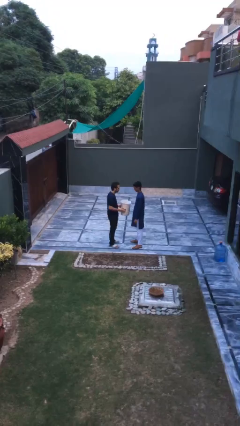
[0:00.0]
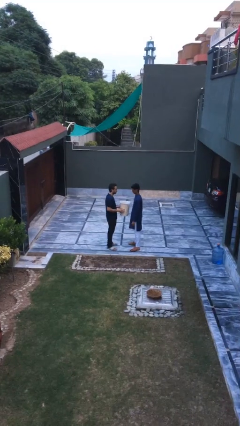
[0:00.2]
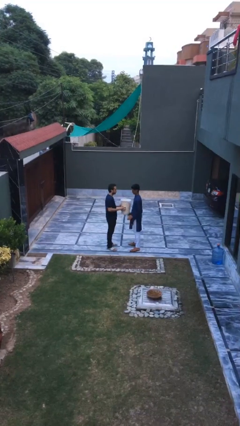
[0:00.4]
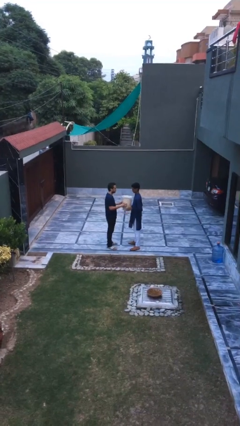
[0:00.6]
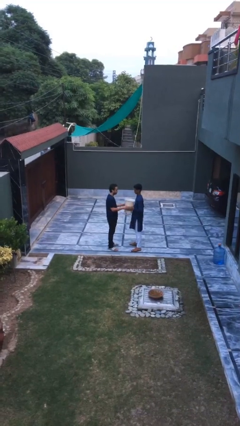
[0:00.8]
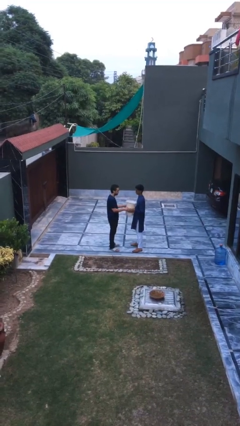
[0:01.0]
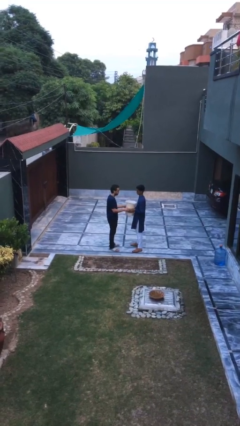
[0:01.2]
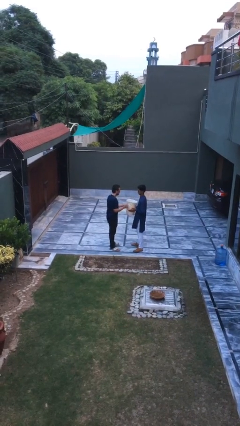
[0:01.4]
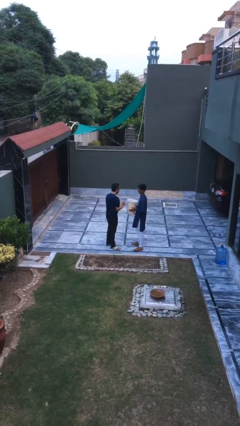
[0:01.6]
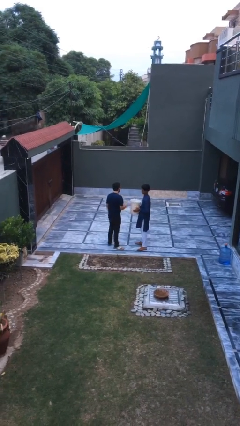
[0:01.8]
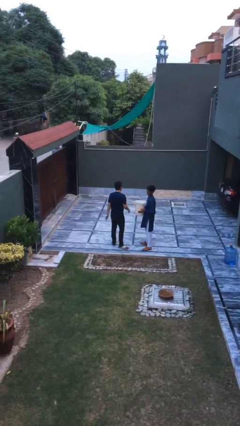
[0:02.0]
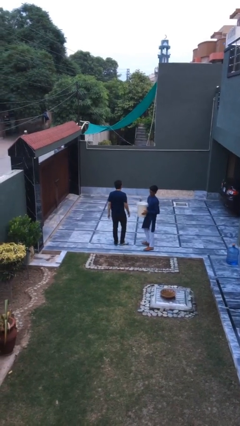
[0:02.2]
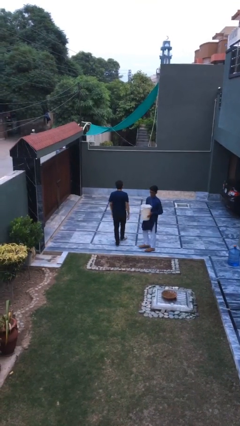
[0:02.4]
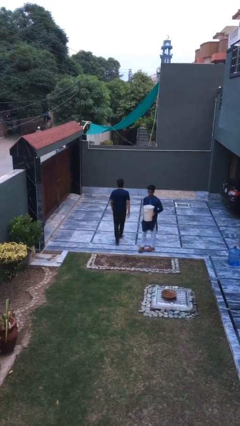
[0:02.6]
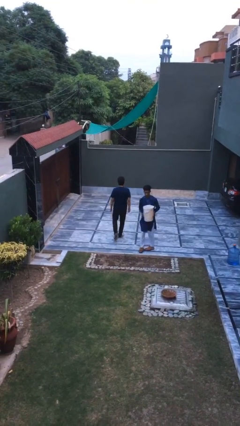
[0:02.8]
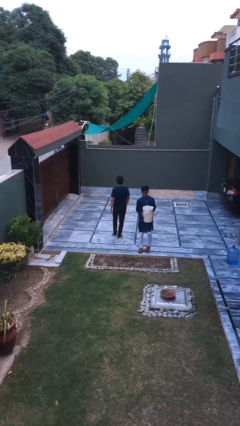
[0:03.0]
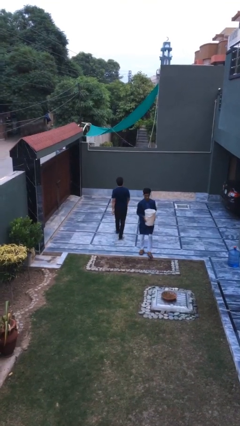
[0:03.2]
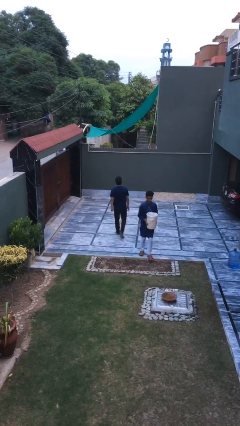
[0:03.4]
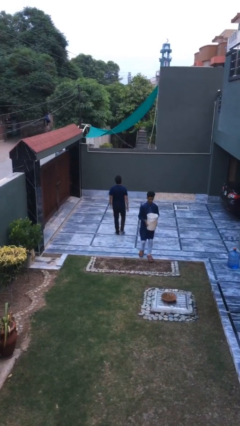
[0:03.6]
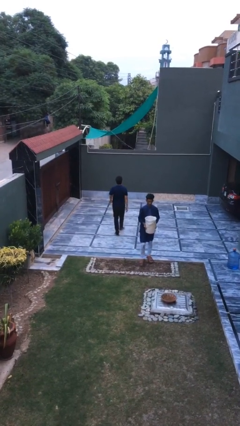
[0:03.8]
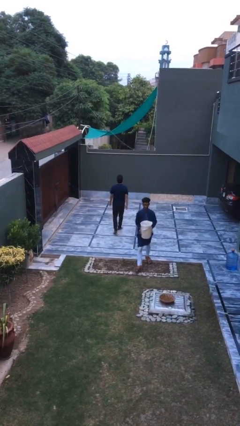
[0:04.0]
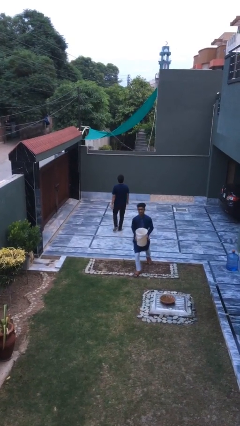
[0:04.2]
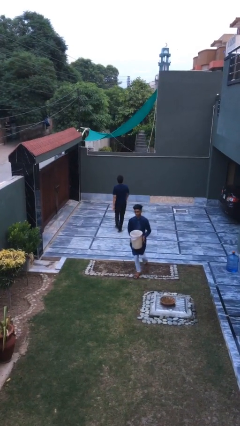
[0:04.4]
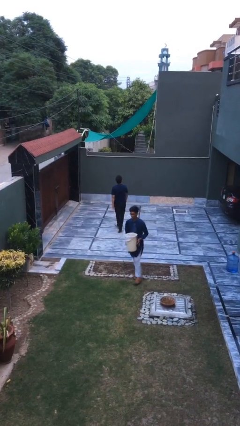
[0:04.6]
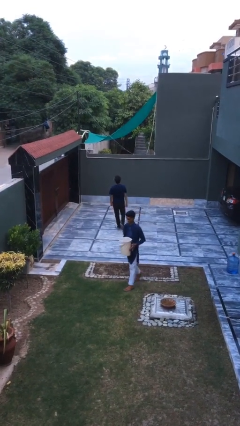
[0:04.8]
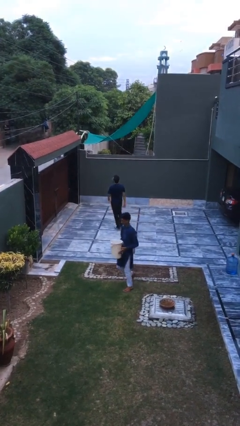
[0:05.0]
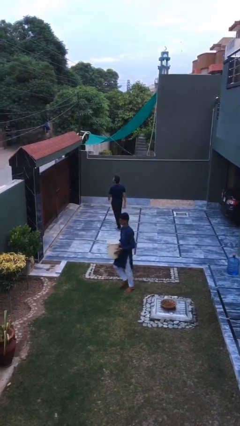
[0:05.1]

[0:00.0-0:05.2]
person transfers object to person

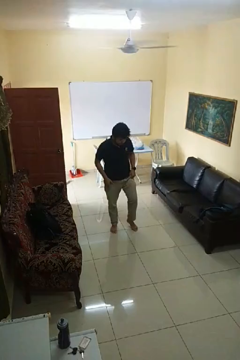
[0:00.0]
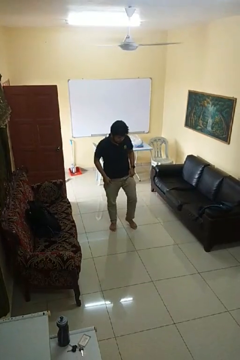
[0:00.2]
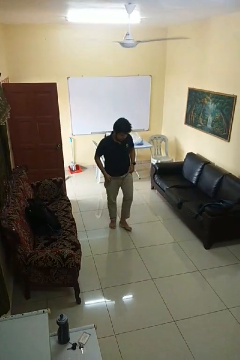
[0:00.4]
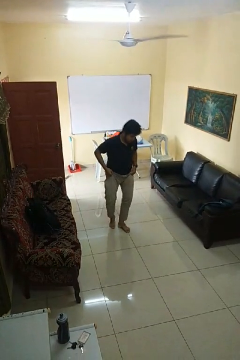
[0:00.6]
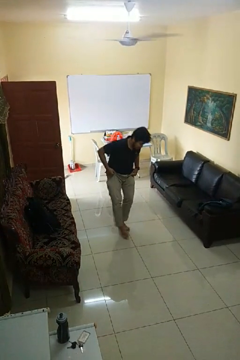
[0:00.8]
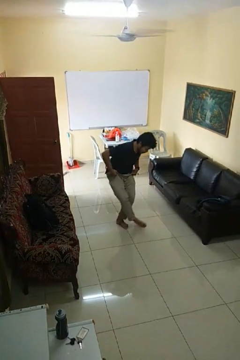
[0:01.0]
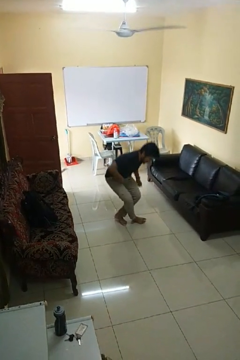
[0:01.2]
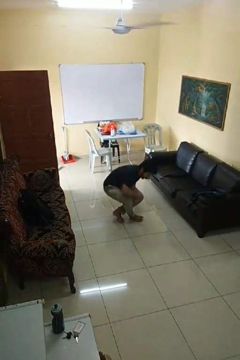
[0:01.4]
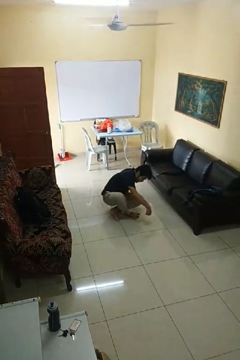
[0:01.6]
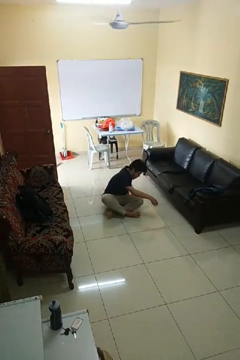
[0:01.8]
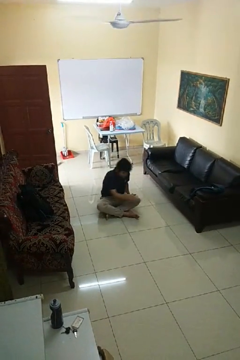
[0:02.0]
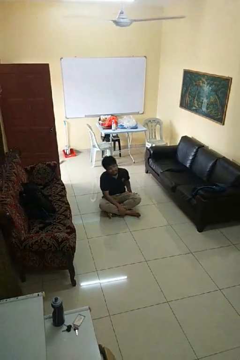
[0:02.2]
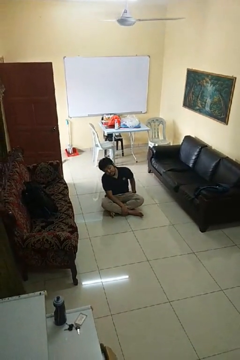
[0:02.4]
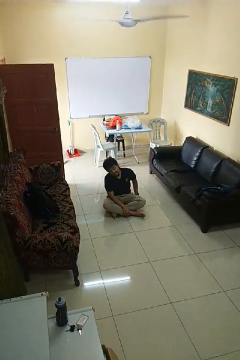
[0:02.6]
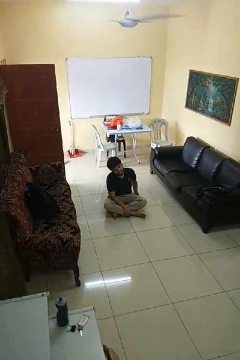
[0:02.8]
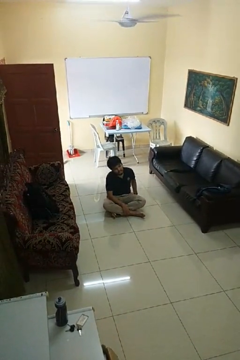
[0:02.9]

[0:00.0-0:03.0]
person sits crisscross

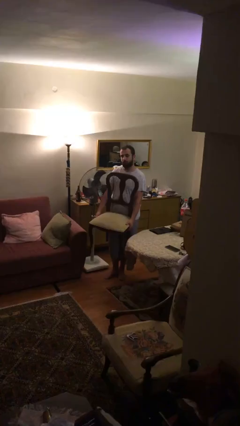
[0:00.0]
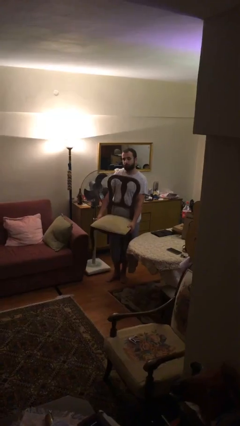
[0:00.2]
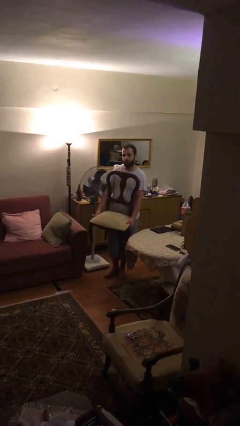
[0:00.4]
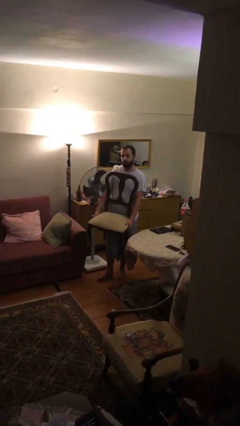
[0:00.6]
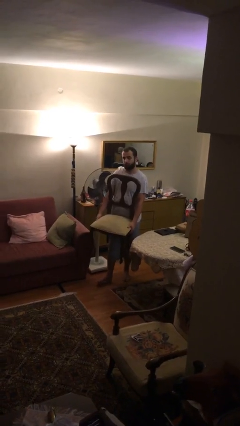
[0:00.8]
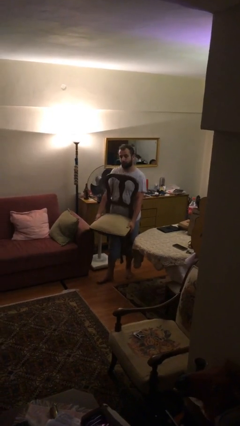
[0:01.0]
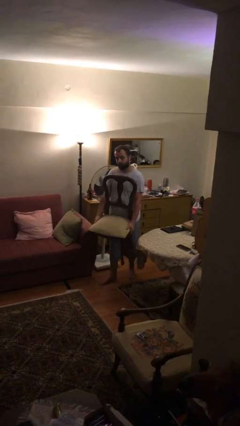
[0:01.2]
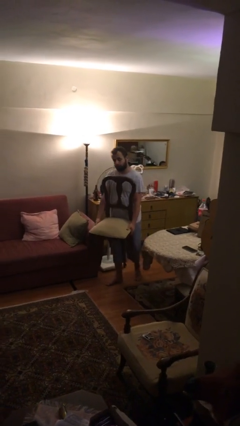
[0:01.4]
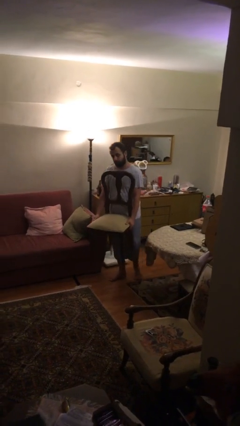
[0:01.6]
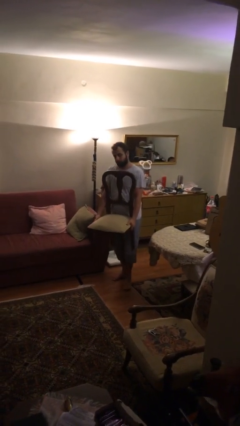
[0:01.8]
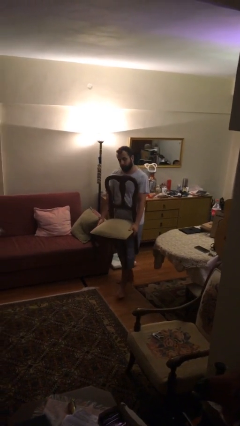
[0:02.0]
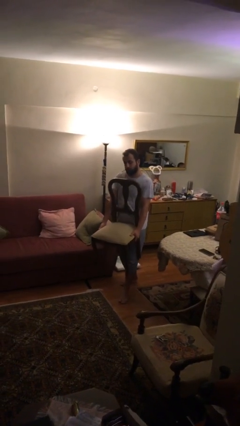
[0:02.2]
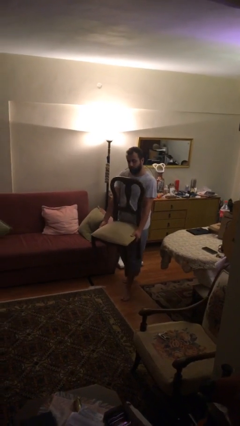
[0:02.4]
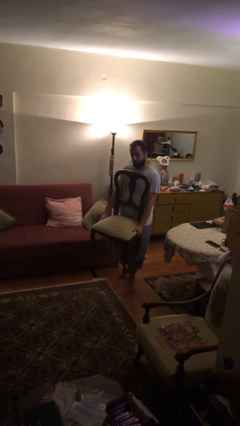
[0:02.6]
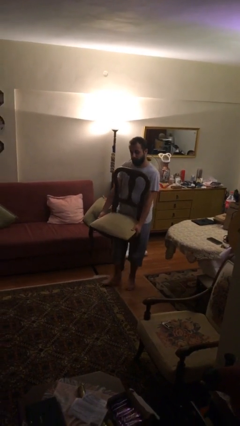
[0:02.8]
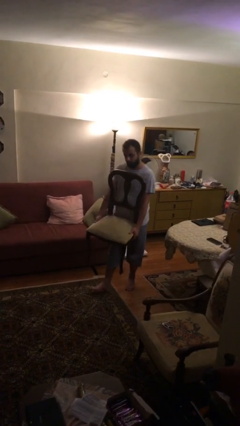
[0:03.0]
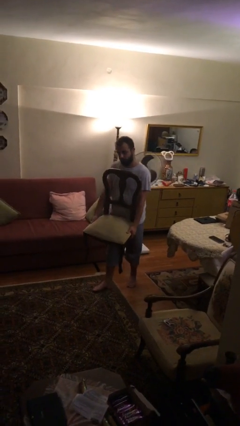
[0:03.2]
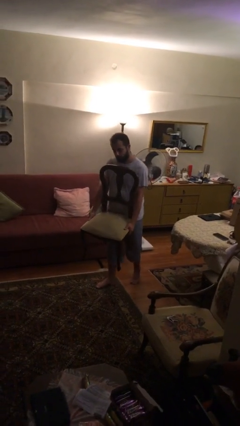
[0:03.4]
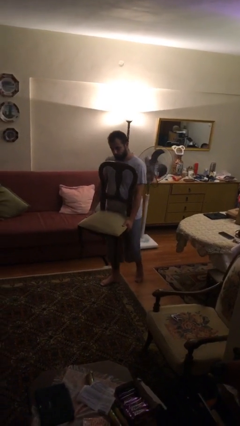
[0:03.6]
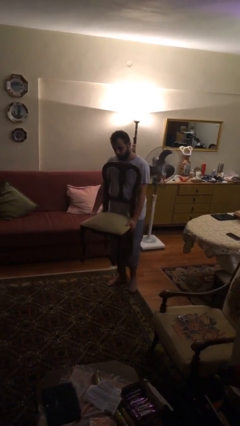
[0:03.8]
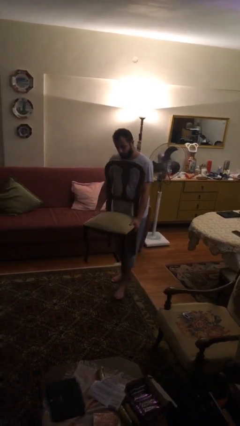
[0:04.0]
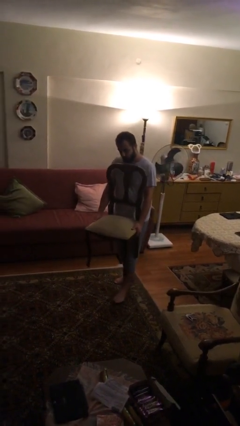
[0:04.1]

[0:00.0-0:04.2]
person carries heavy object

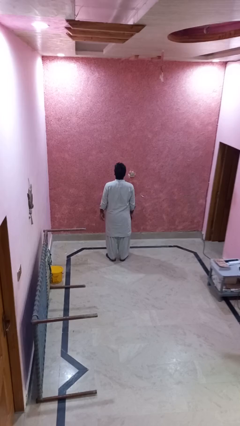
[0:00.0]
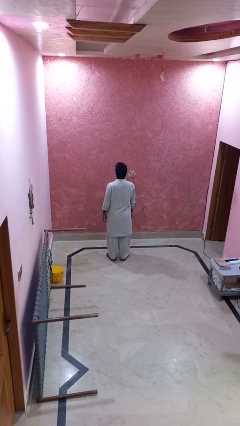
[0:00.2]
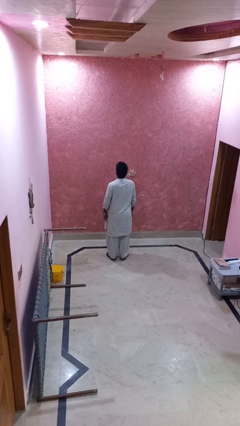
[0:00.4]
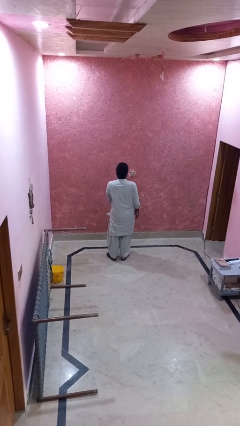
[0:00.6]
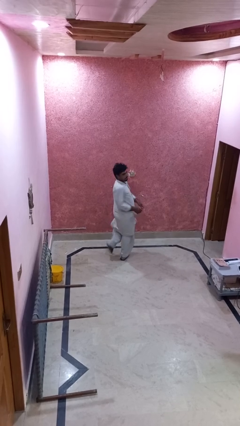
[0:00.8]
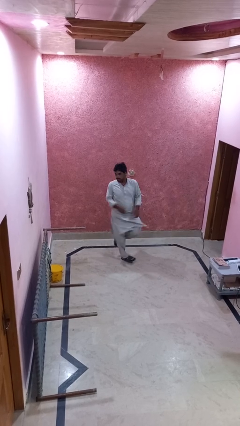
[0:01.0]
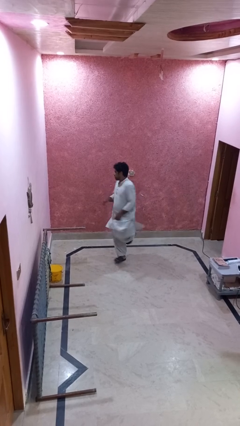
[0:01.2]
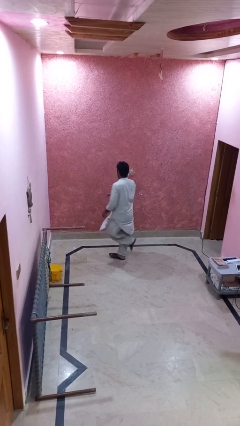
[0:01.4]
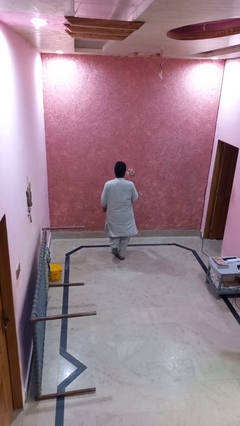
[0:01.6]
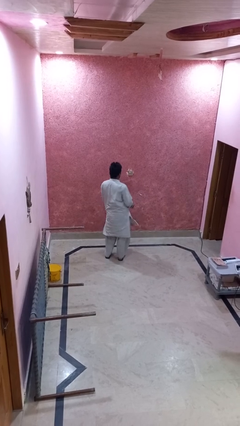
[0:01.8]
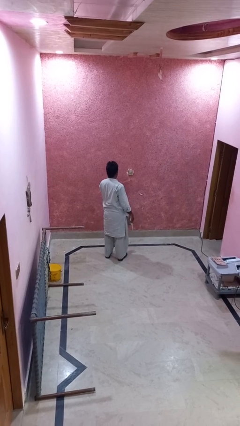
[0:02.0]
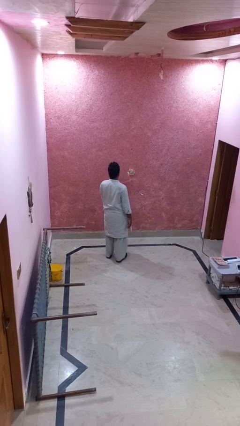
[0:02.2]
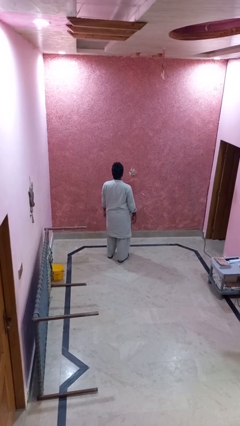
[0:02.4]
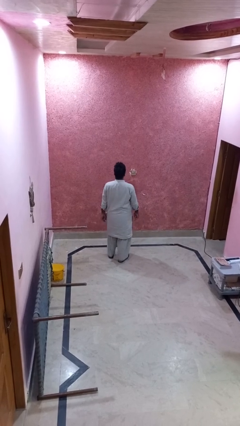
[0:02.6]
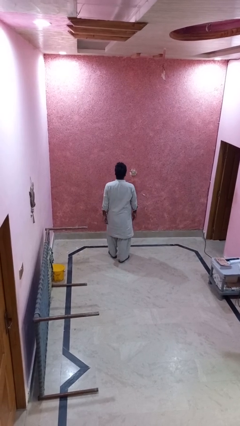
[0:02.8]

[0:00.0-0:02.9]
person twirls

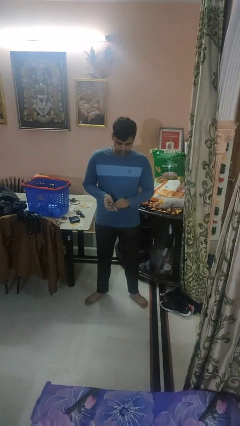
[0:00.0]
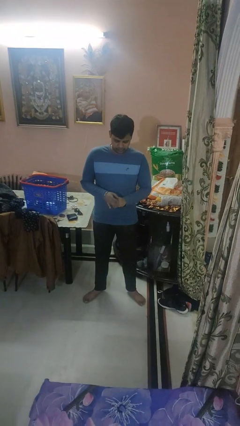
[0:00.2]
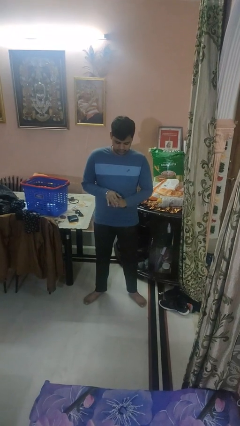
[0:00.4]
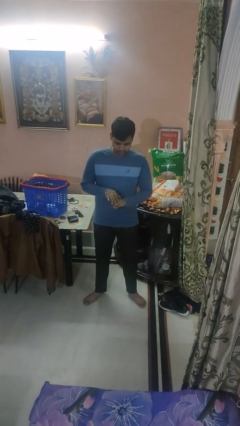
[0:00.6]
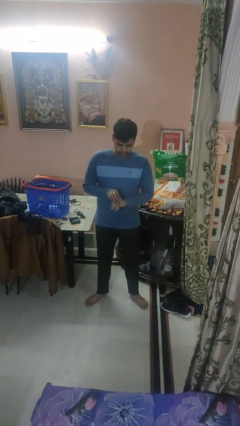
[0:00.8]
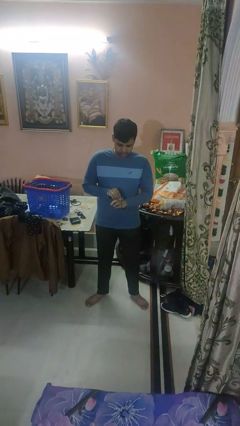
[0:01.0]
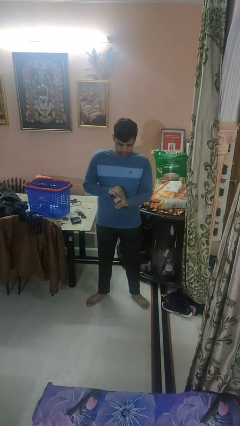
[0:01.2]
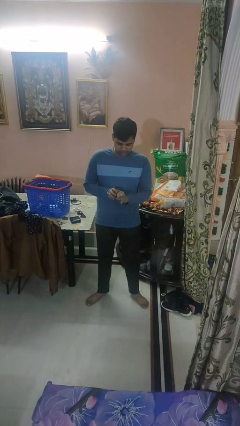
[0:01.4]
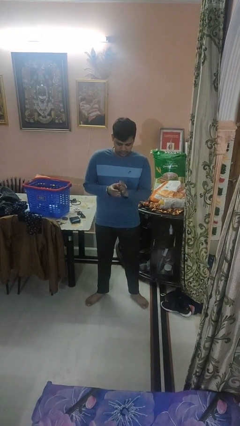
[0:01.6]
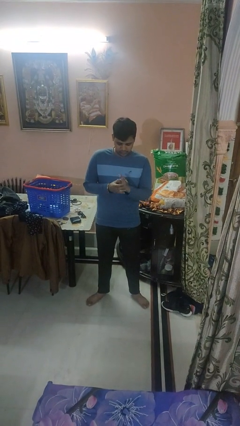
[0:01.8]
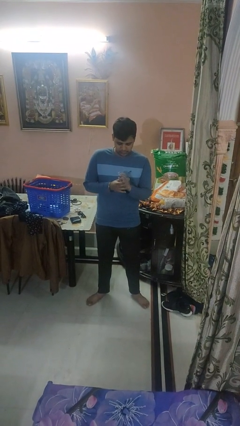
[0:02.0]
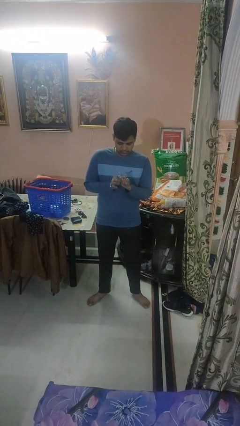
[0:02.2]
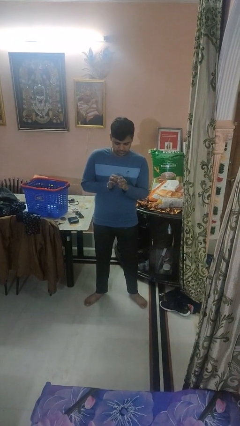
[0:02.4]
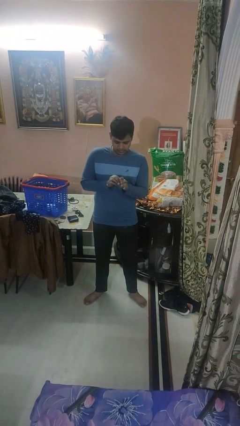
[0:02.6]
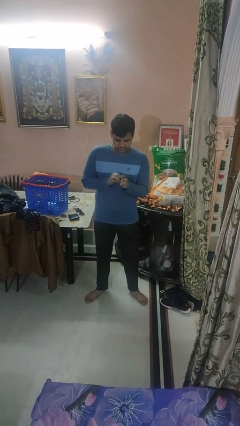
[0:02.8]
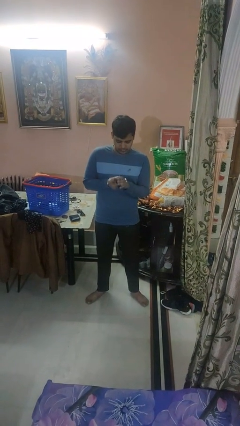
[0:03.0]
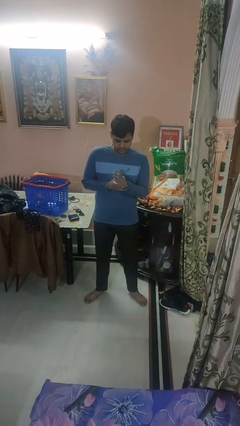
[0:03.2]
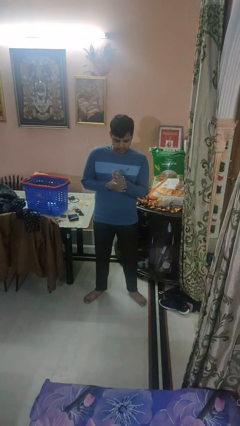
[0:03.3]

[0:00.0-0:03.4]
person puts on wristwatch
